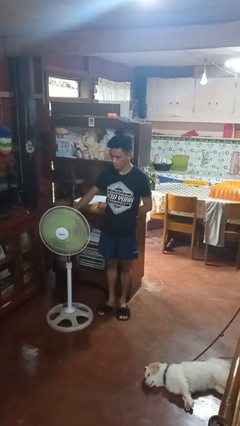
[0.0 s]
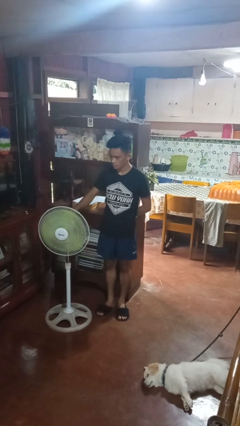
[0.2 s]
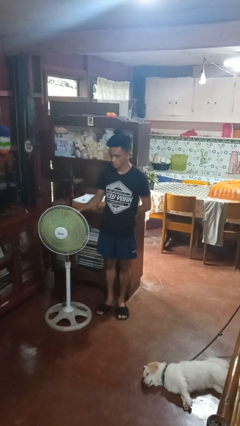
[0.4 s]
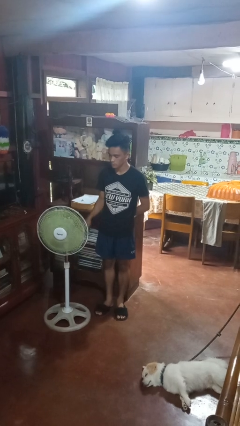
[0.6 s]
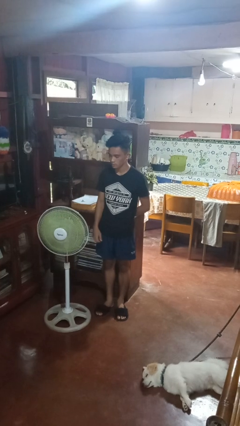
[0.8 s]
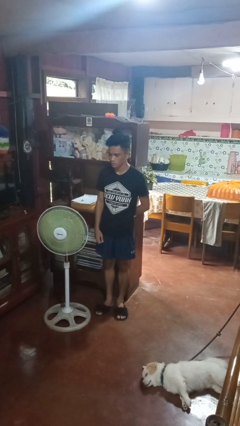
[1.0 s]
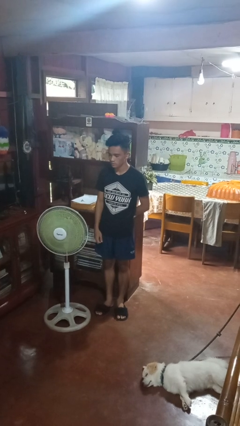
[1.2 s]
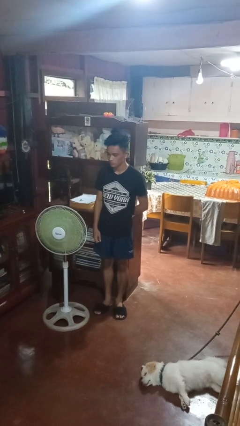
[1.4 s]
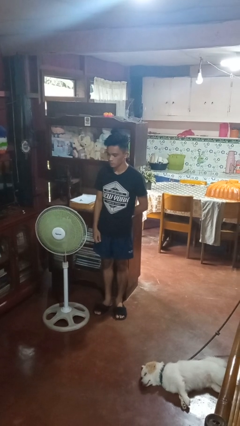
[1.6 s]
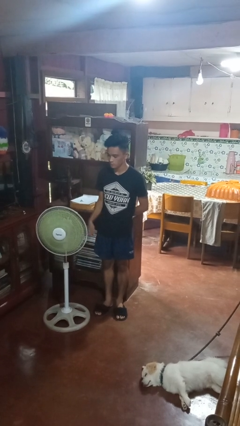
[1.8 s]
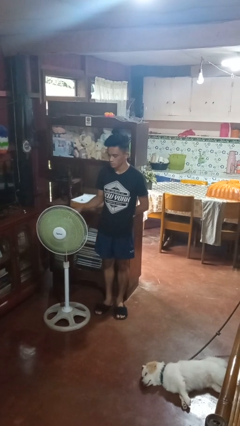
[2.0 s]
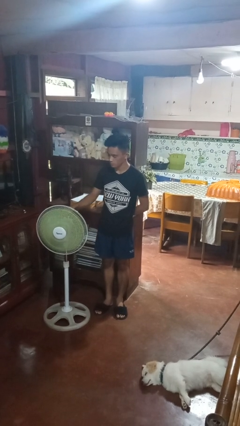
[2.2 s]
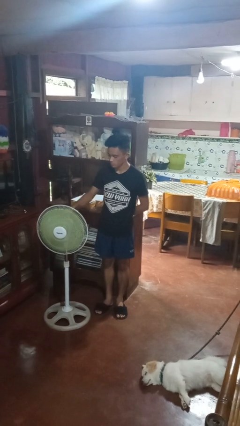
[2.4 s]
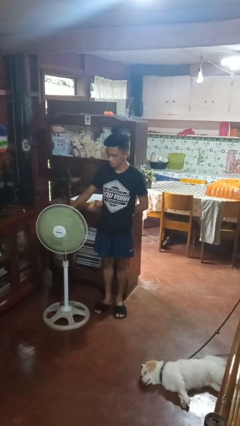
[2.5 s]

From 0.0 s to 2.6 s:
person turns on fan

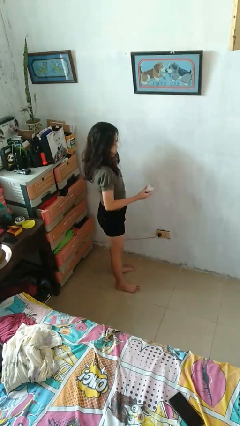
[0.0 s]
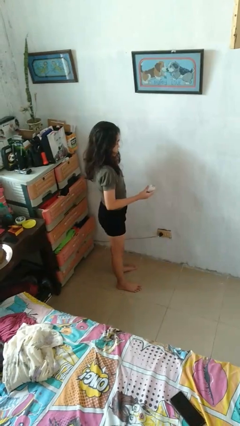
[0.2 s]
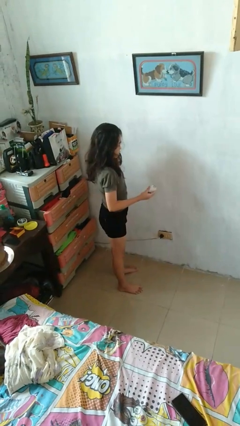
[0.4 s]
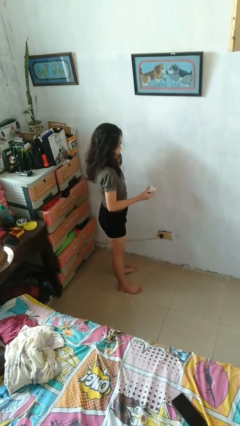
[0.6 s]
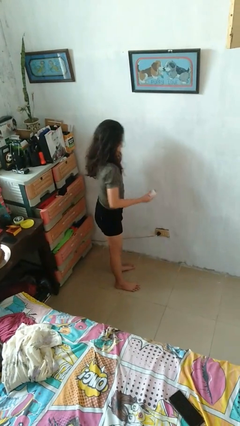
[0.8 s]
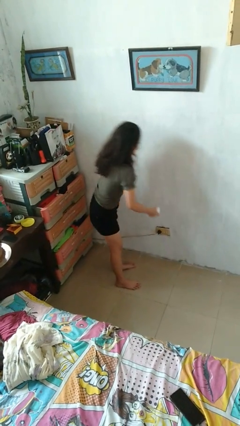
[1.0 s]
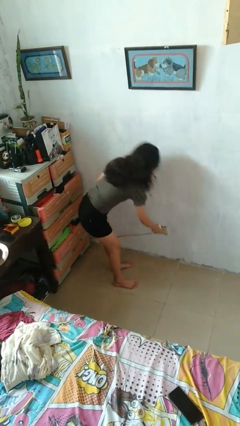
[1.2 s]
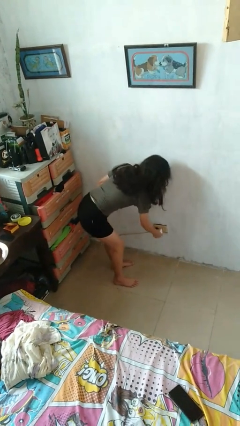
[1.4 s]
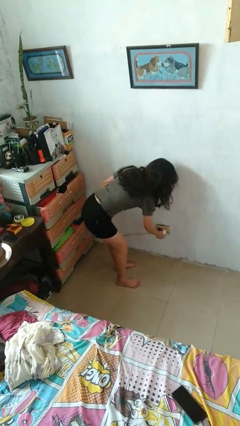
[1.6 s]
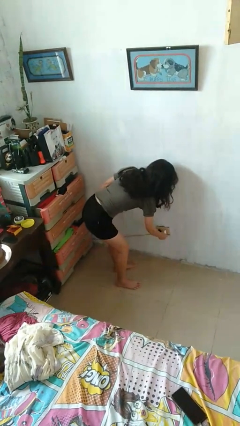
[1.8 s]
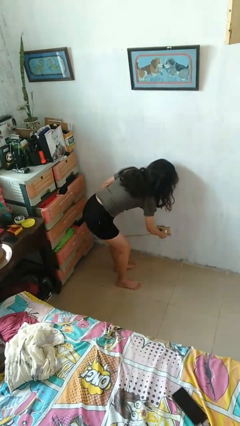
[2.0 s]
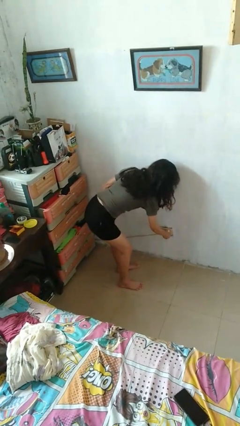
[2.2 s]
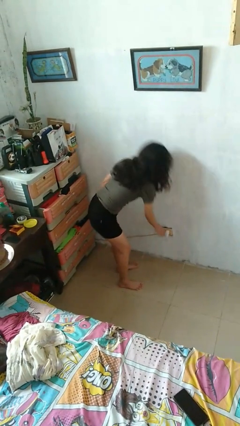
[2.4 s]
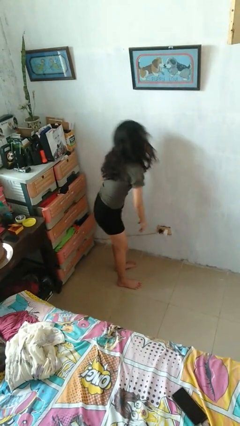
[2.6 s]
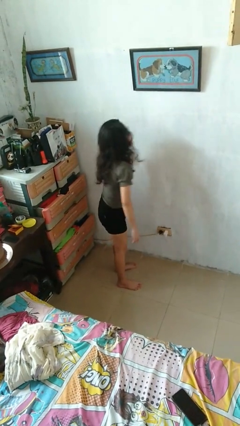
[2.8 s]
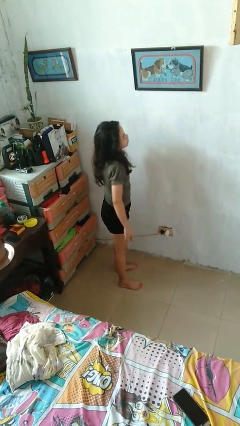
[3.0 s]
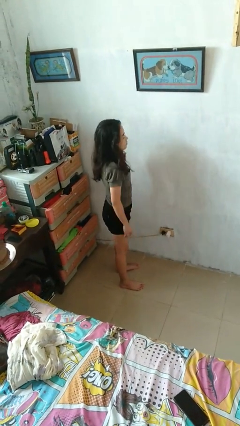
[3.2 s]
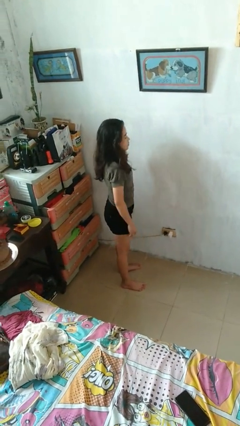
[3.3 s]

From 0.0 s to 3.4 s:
person plugs into electrical socket

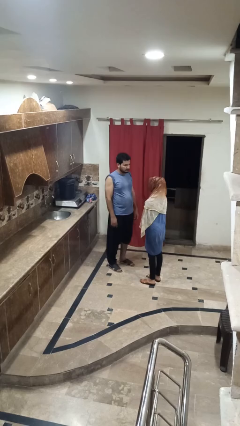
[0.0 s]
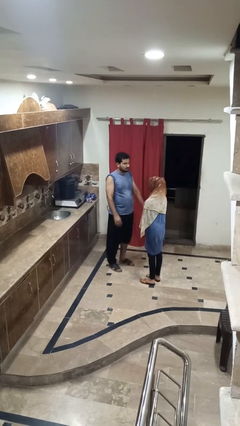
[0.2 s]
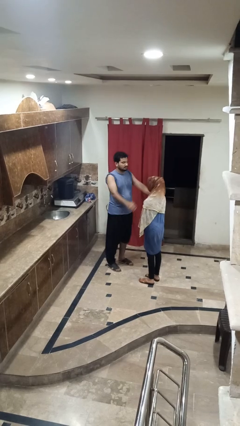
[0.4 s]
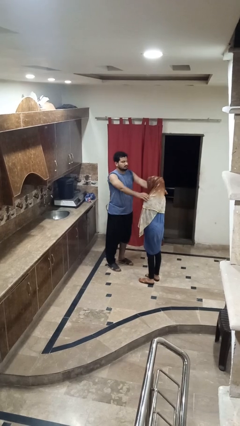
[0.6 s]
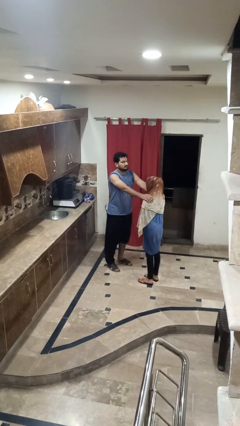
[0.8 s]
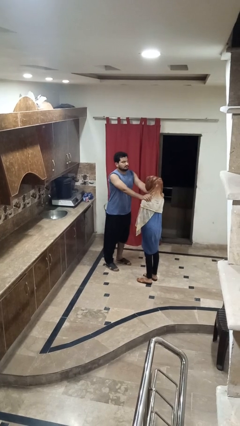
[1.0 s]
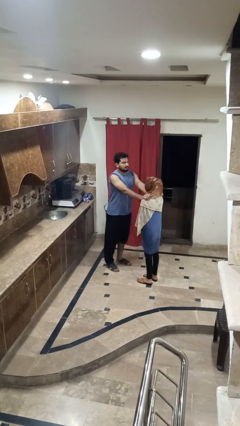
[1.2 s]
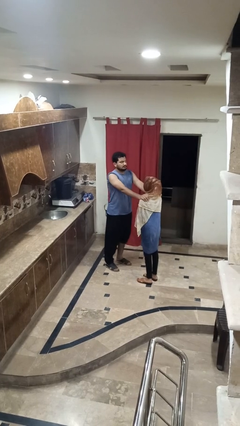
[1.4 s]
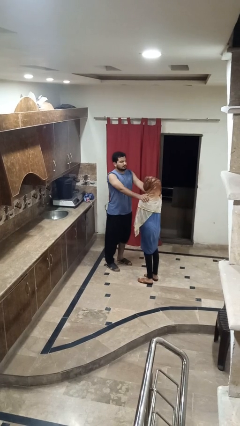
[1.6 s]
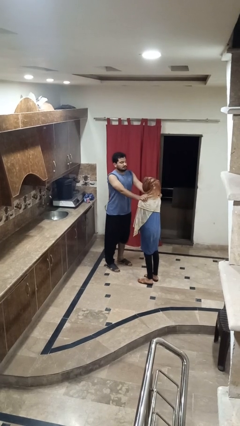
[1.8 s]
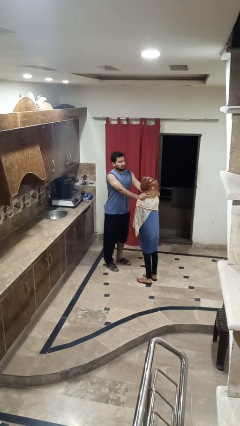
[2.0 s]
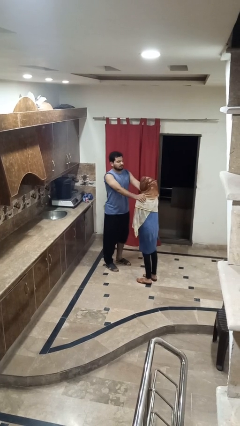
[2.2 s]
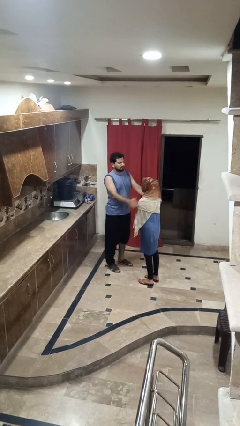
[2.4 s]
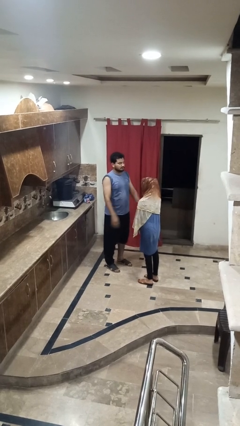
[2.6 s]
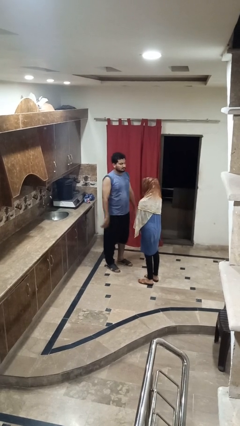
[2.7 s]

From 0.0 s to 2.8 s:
person pounds shoulders of person

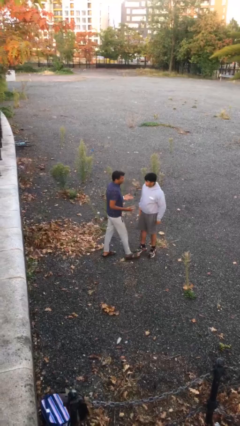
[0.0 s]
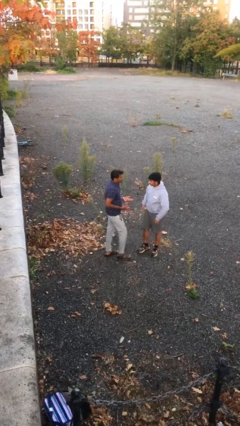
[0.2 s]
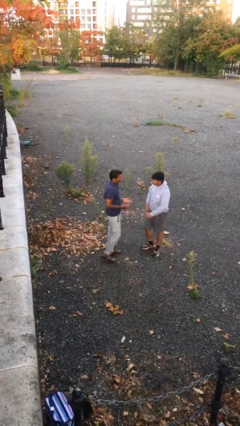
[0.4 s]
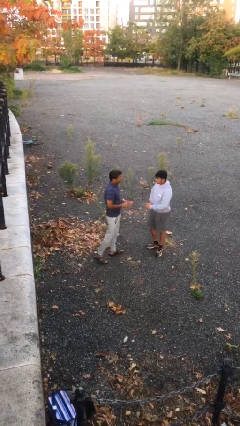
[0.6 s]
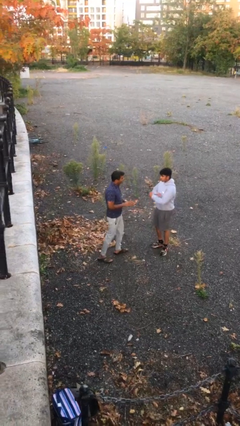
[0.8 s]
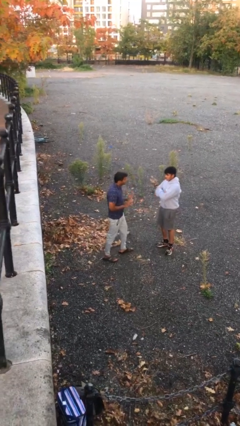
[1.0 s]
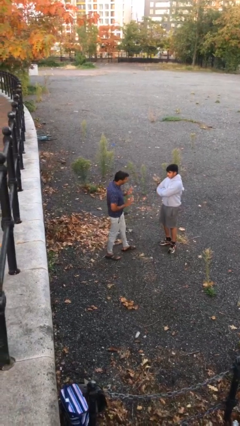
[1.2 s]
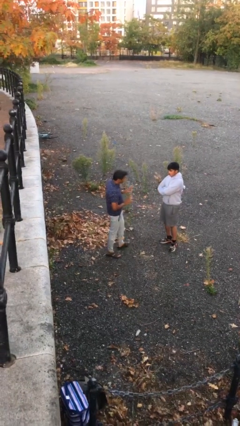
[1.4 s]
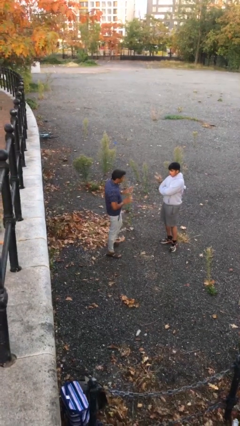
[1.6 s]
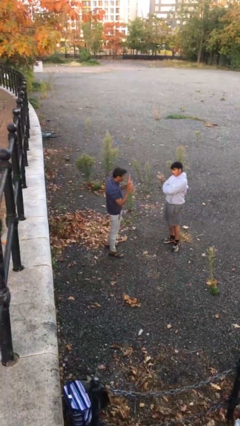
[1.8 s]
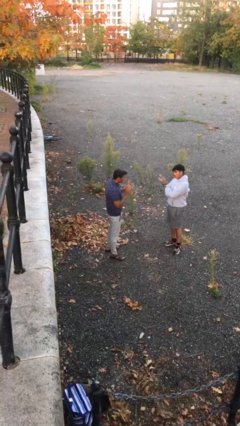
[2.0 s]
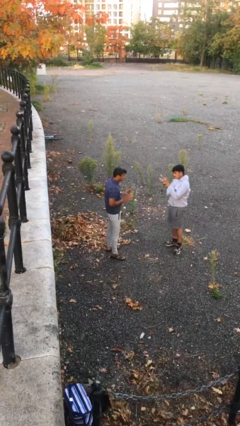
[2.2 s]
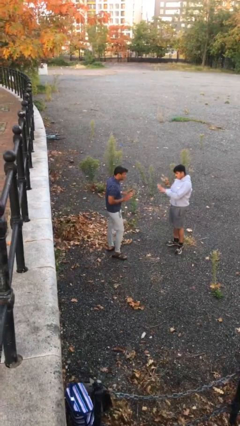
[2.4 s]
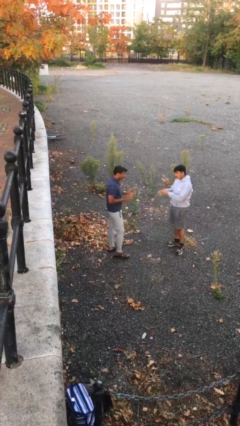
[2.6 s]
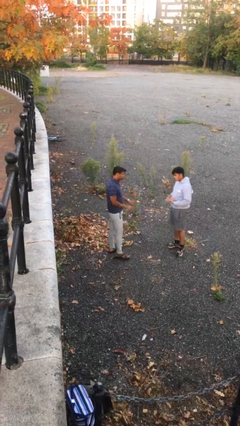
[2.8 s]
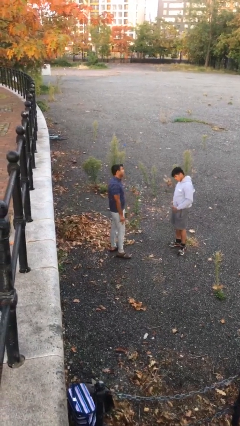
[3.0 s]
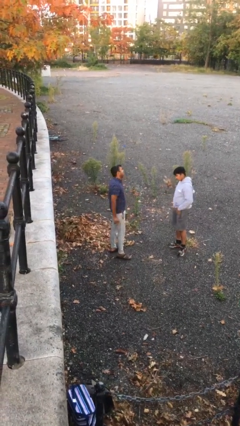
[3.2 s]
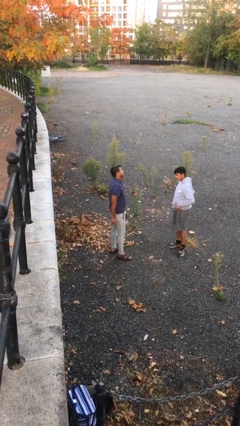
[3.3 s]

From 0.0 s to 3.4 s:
person talks to person

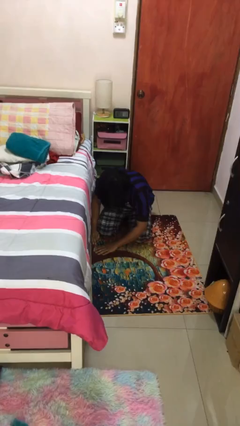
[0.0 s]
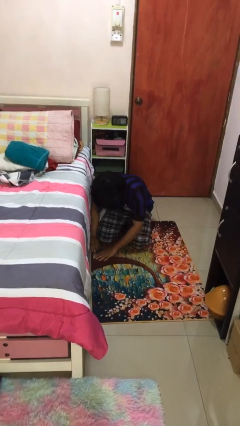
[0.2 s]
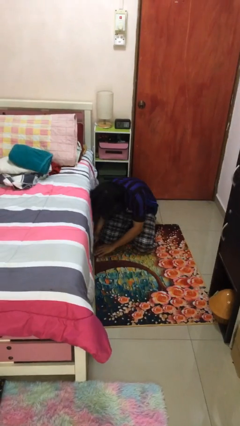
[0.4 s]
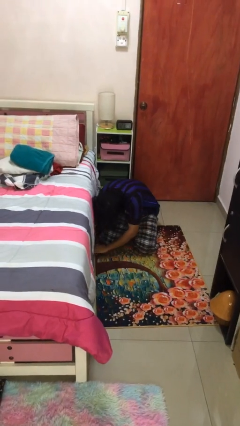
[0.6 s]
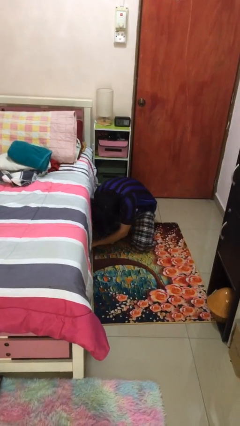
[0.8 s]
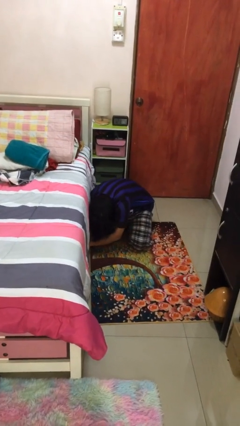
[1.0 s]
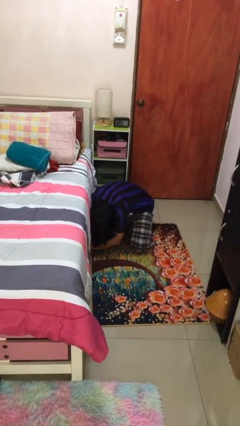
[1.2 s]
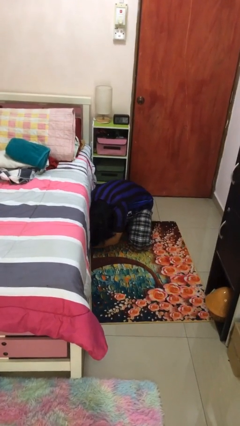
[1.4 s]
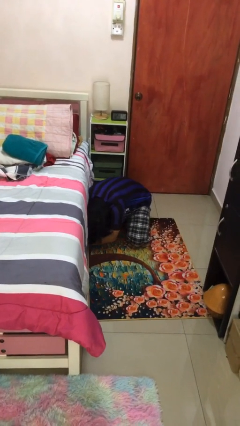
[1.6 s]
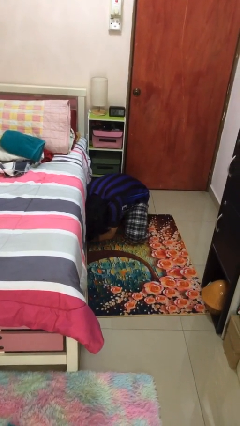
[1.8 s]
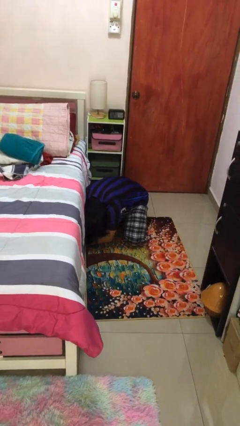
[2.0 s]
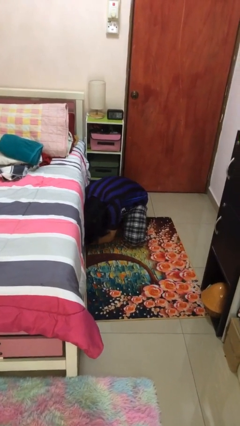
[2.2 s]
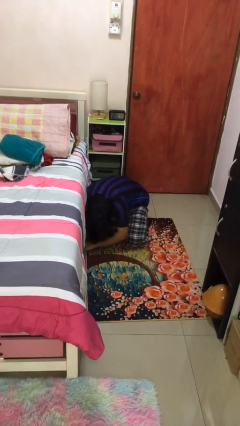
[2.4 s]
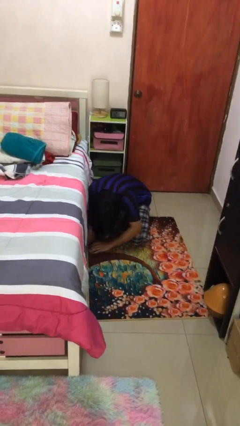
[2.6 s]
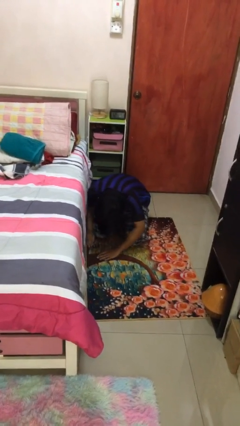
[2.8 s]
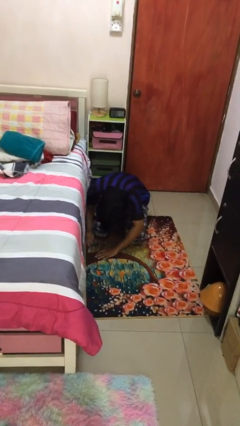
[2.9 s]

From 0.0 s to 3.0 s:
person searches under bed

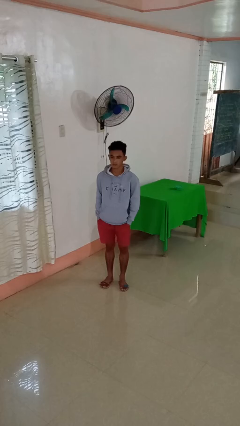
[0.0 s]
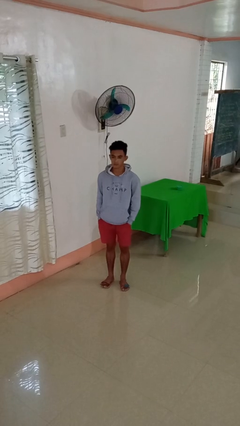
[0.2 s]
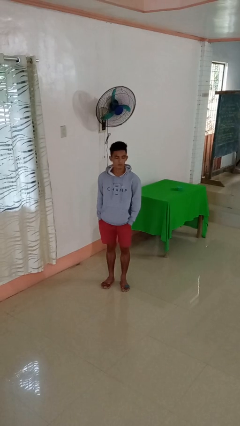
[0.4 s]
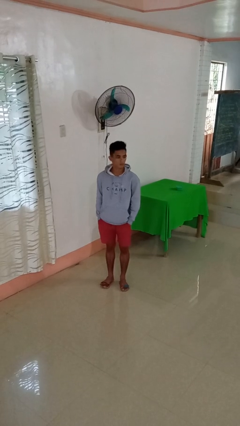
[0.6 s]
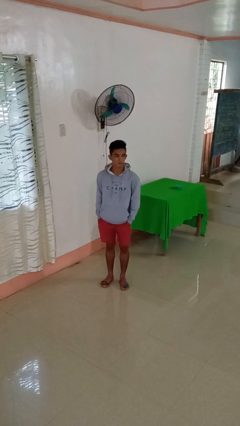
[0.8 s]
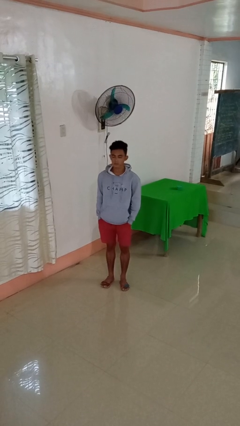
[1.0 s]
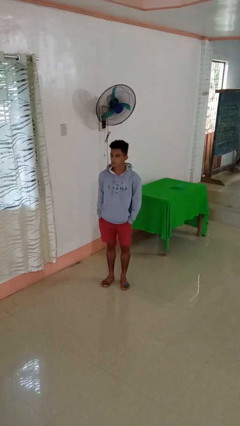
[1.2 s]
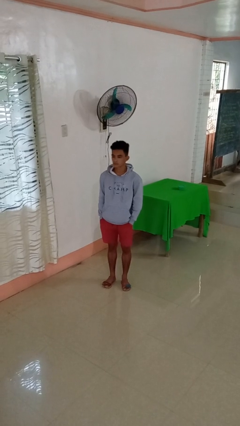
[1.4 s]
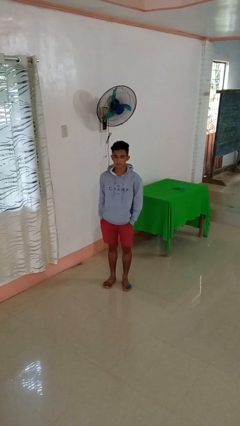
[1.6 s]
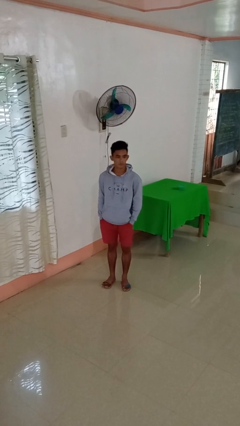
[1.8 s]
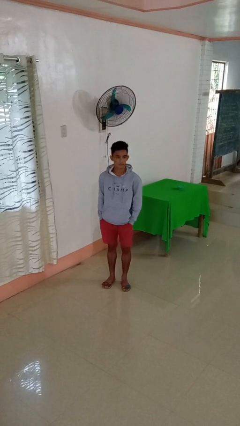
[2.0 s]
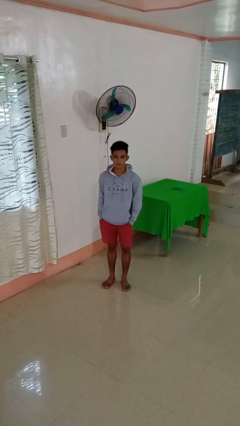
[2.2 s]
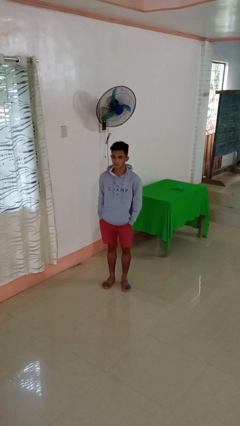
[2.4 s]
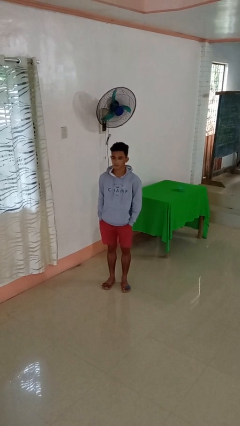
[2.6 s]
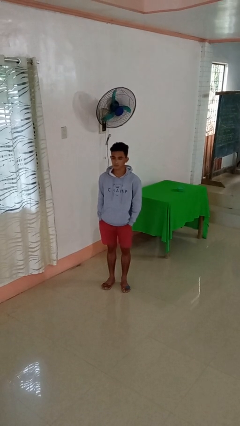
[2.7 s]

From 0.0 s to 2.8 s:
person shakes head
